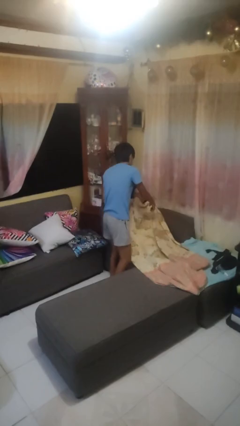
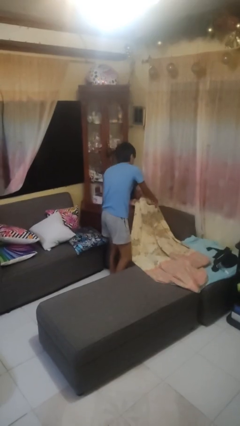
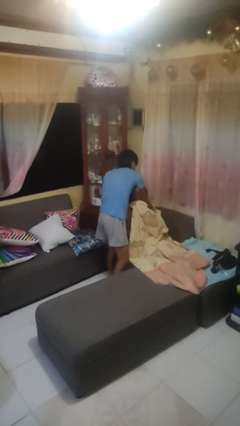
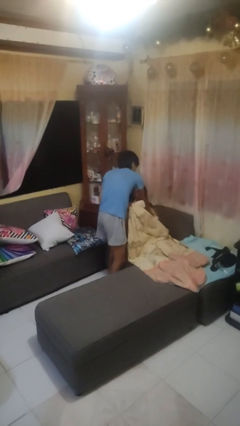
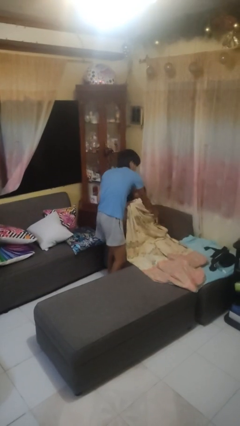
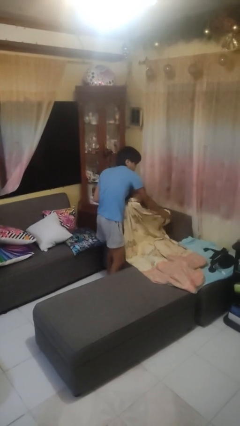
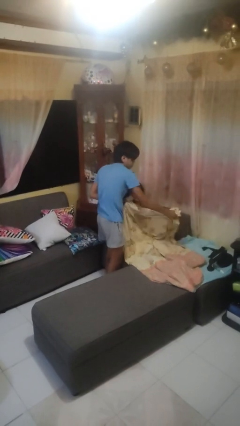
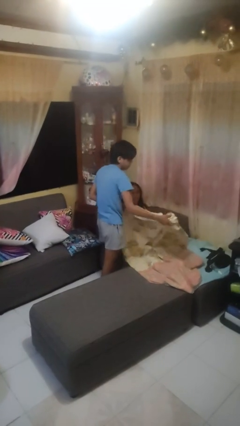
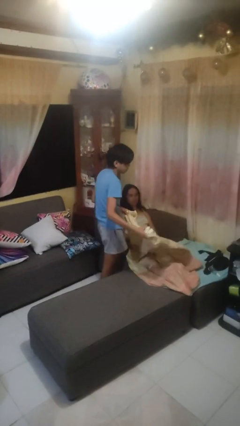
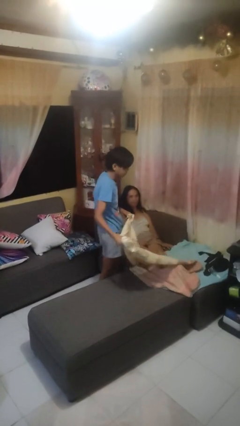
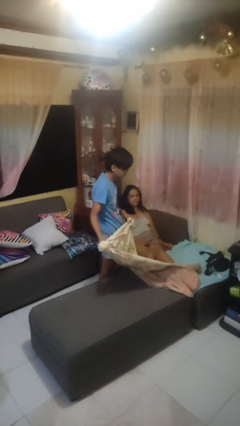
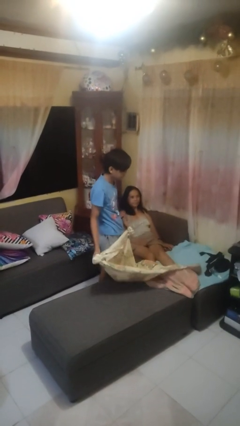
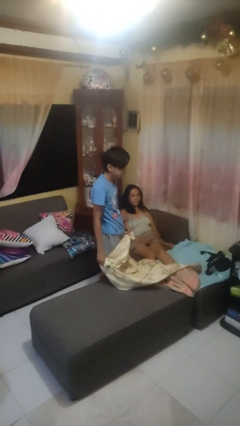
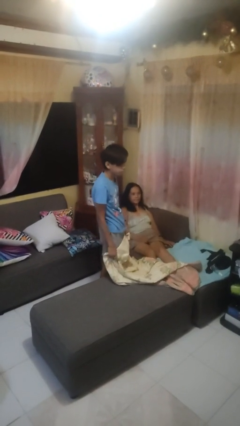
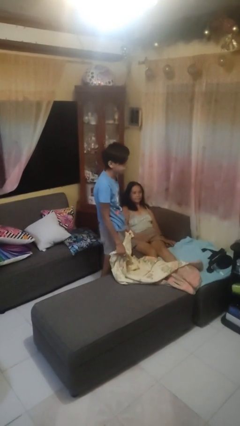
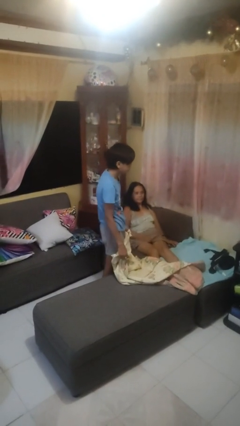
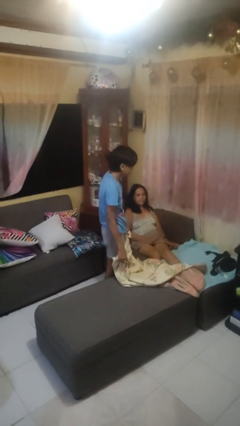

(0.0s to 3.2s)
person uncovers friend with blanket

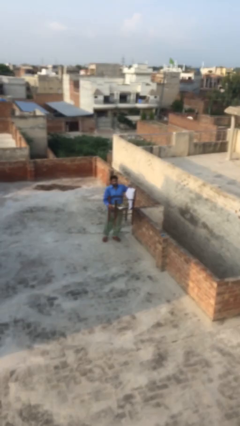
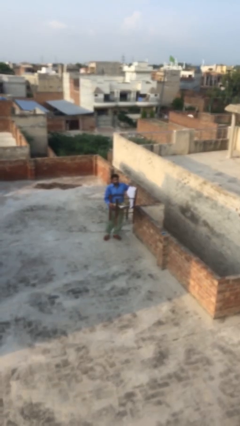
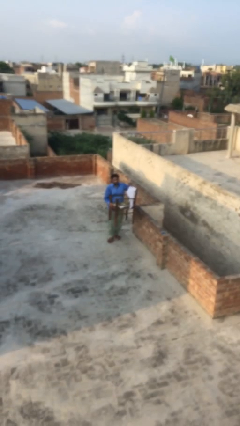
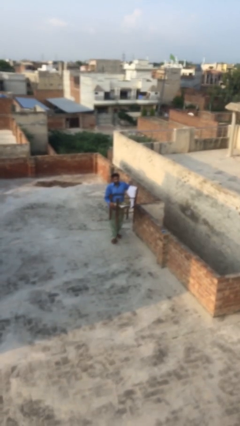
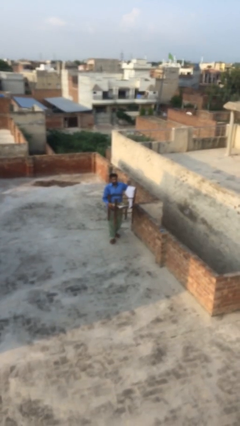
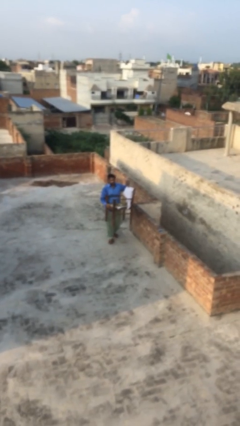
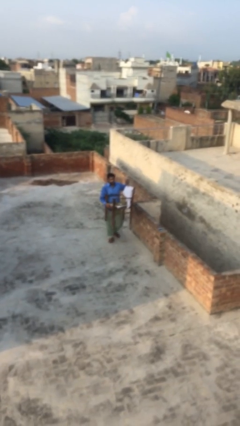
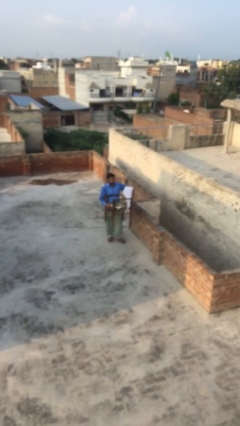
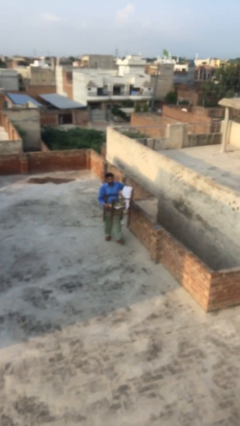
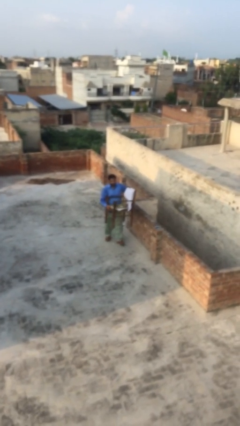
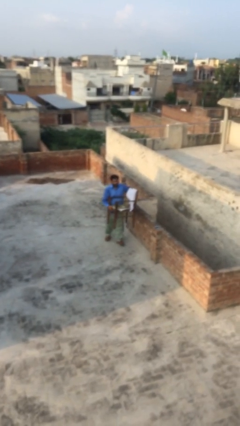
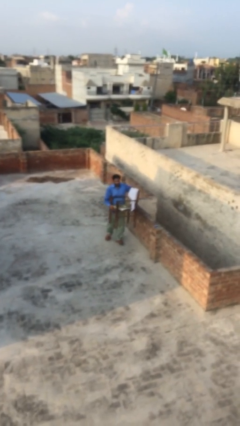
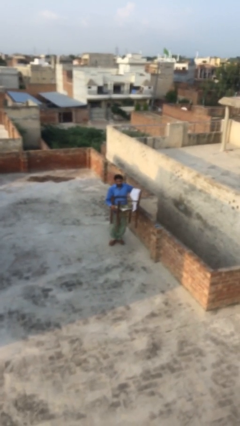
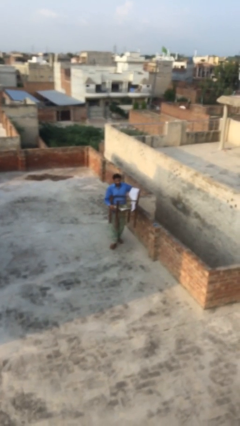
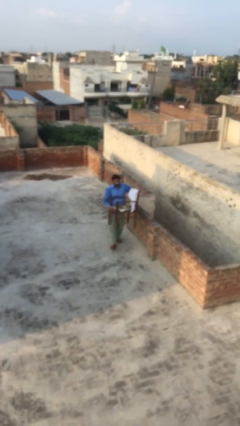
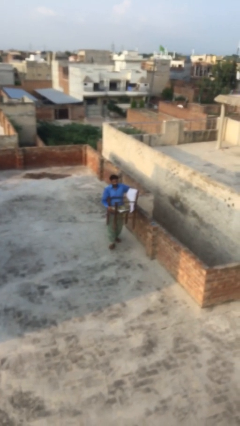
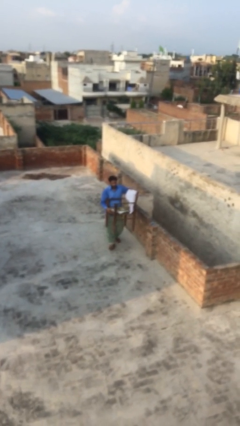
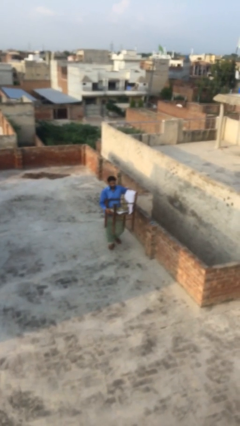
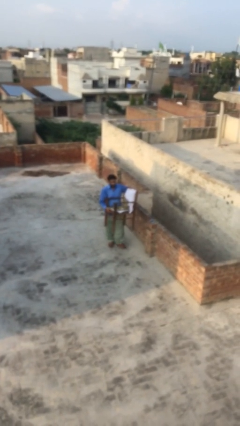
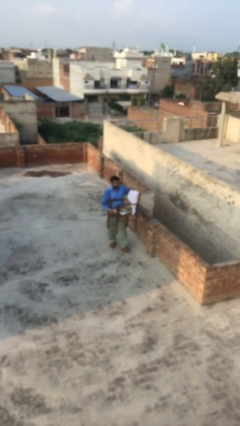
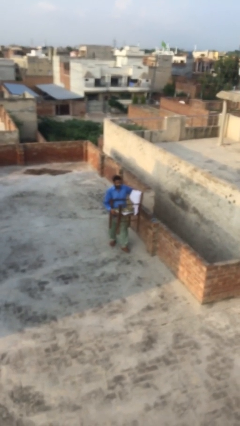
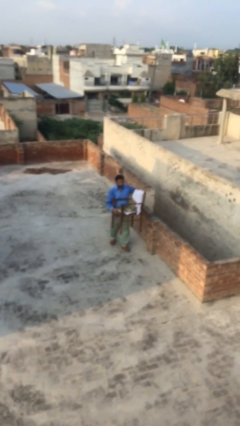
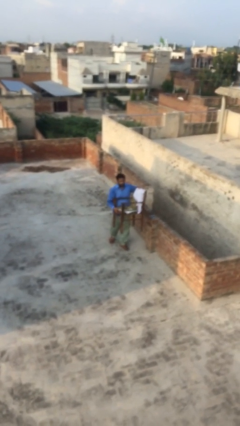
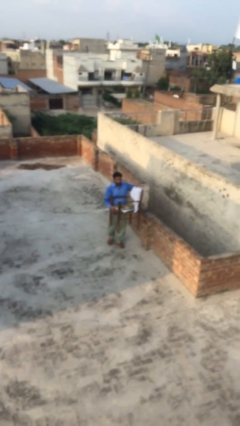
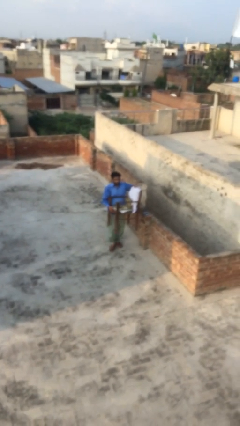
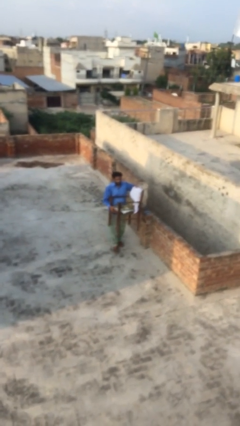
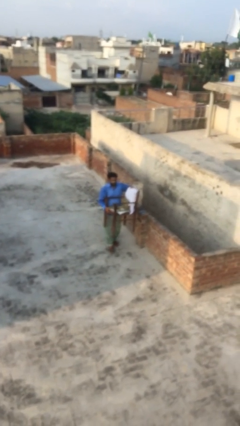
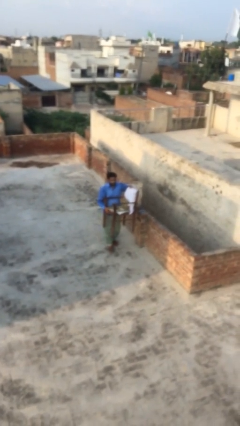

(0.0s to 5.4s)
person carries heavy object

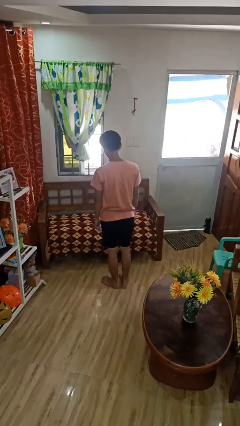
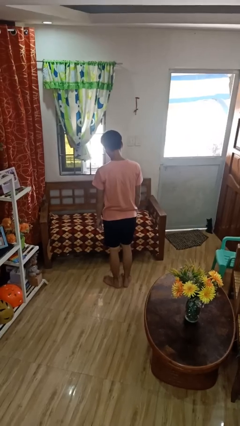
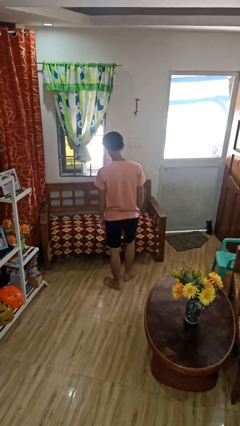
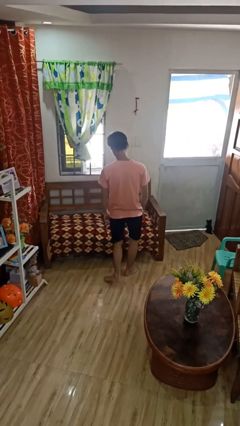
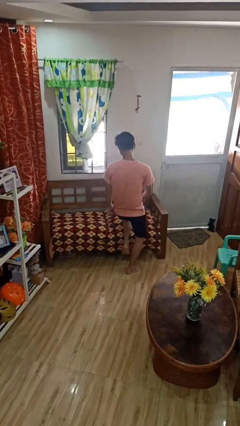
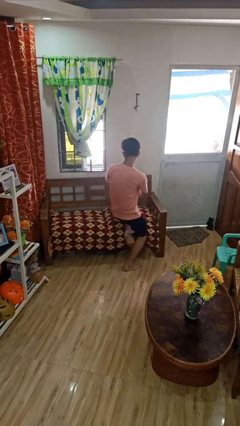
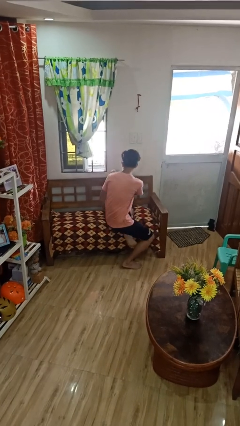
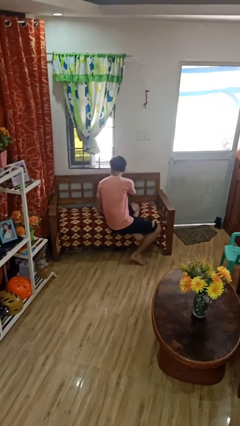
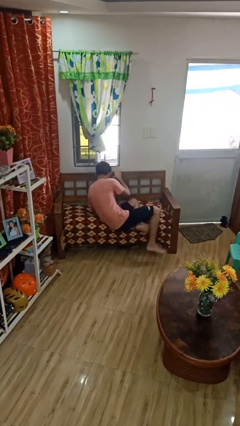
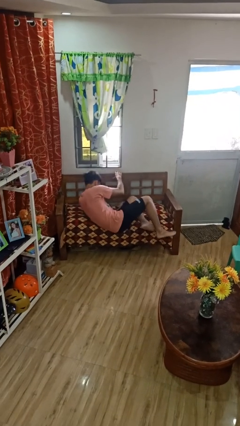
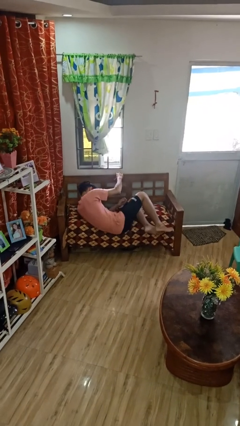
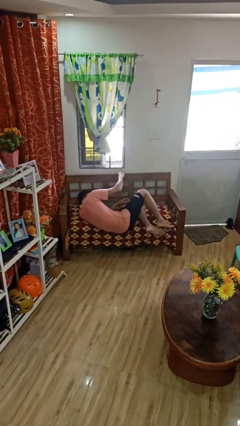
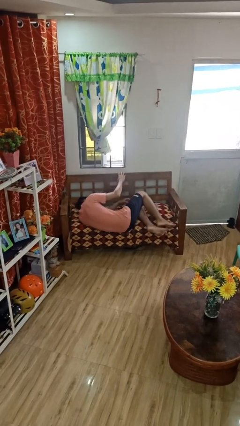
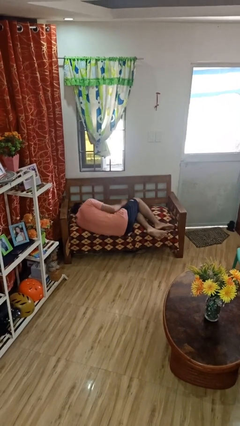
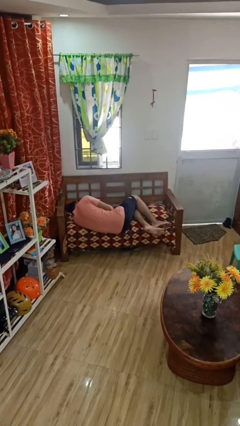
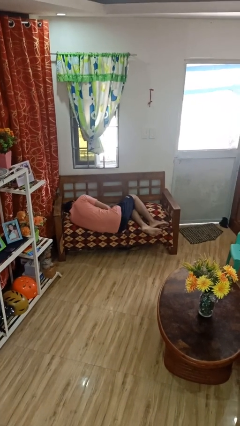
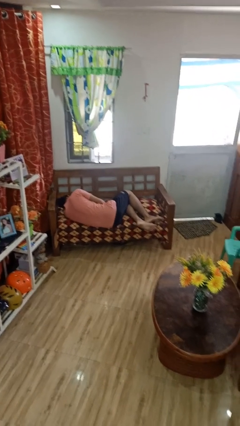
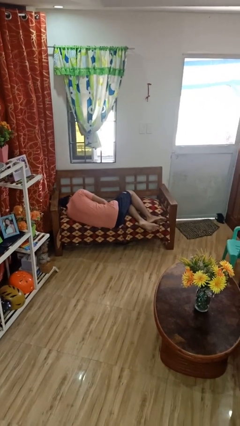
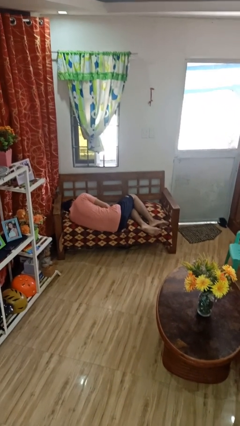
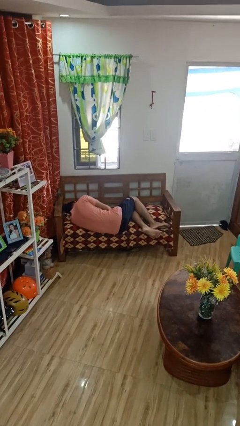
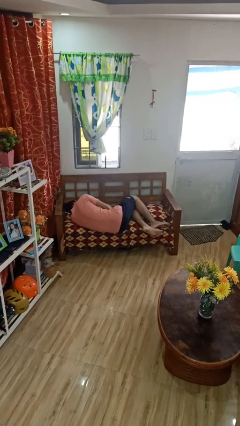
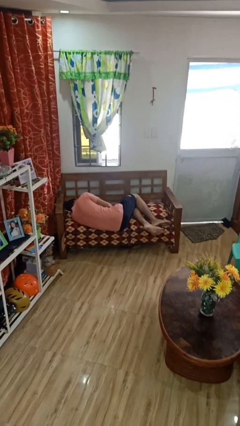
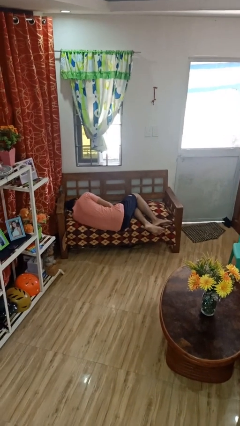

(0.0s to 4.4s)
person lies down on couch

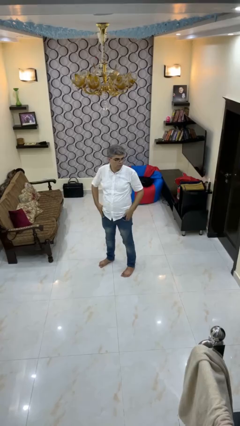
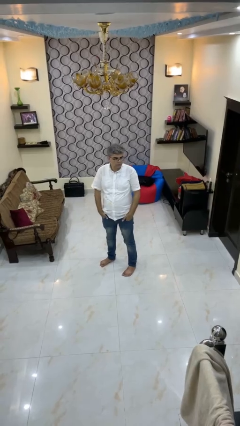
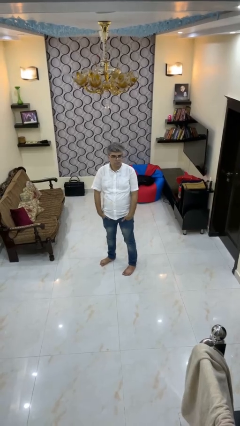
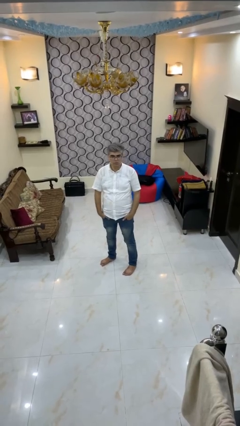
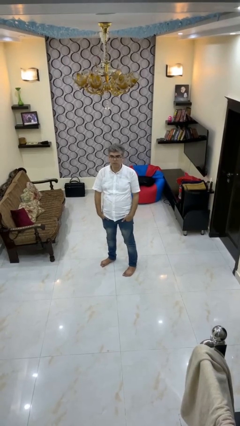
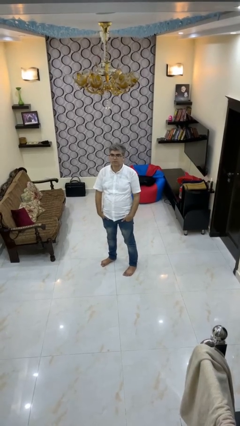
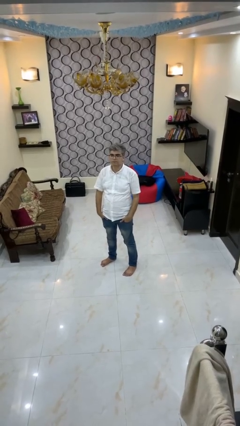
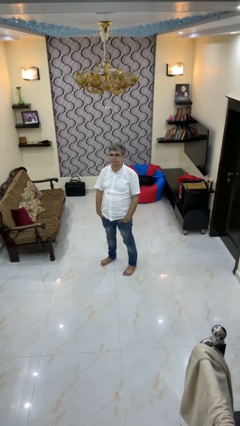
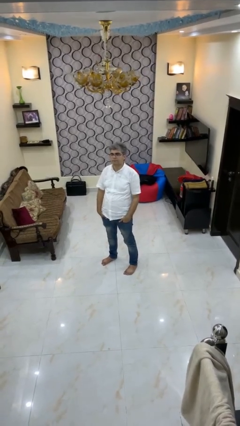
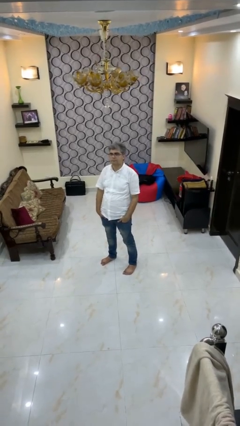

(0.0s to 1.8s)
person puts hands in back pockets

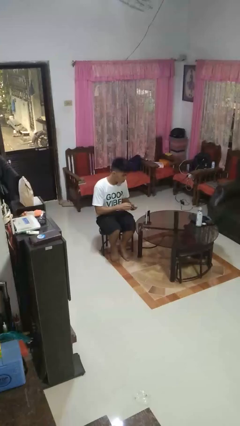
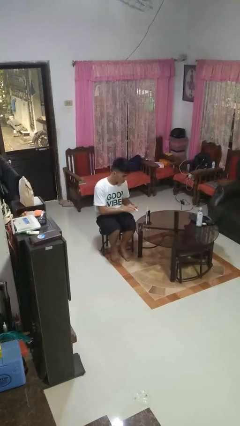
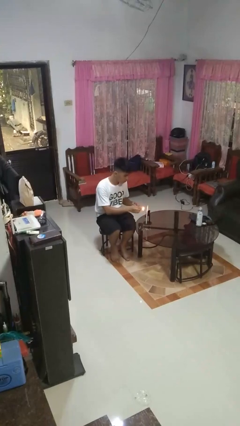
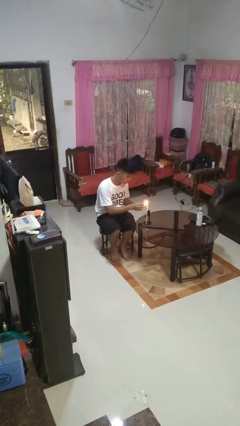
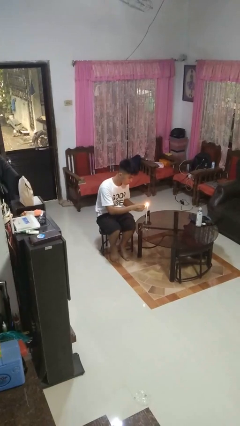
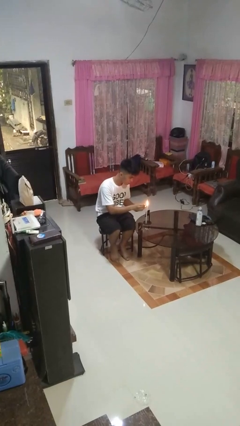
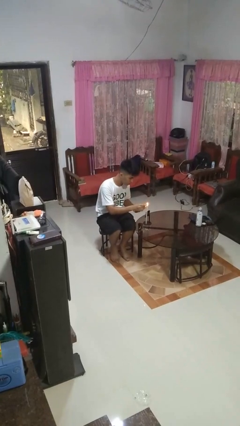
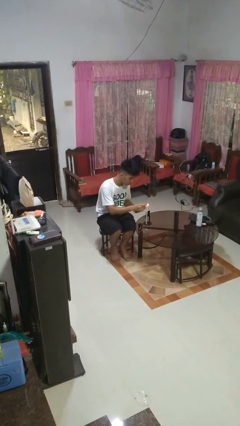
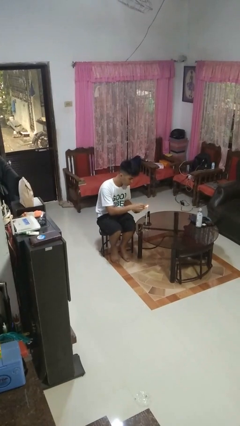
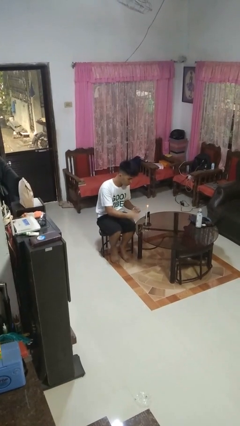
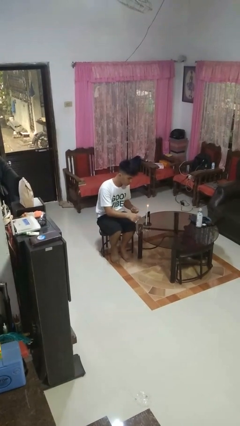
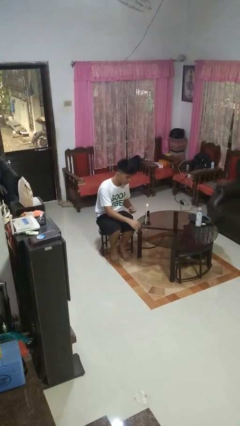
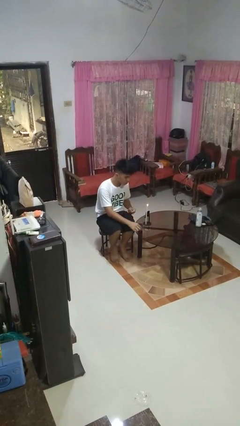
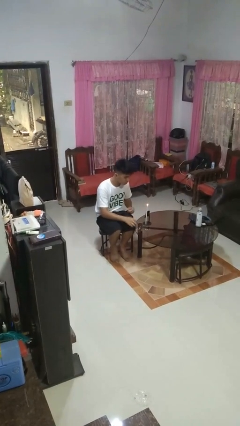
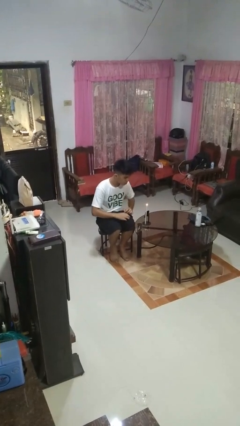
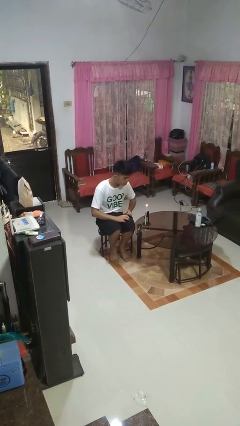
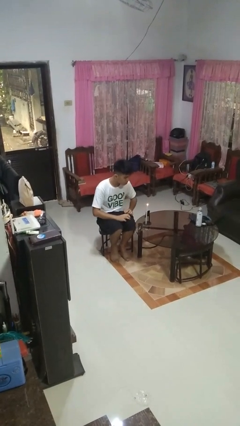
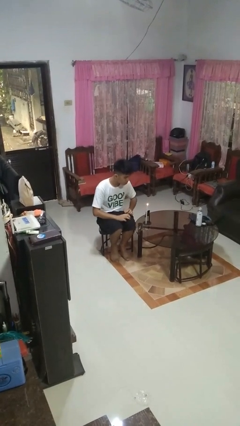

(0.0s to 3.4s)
person lights candle
